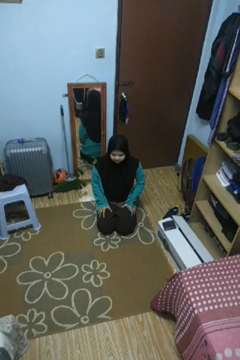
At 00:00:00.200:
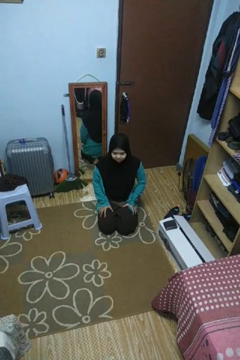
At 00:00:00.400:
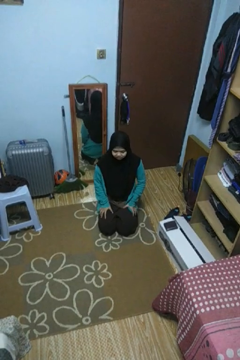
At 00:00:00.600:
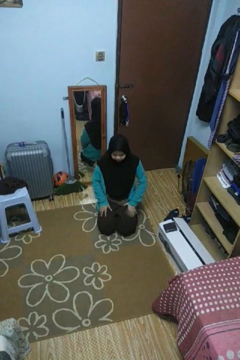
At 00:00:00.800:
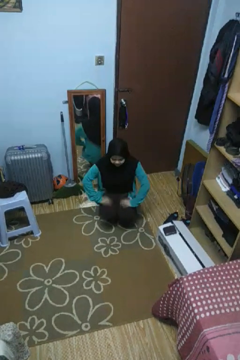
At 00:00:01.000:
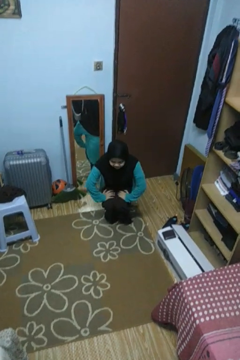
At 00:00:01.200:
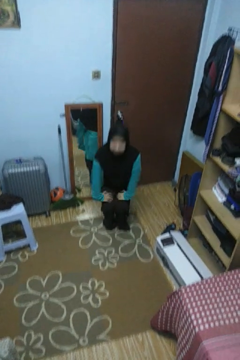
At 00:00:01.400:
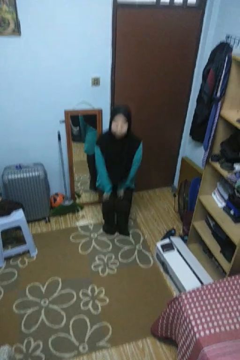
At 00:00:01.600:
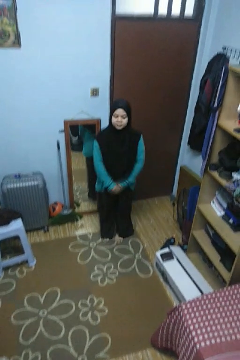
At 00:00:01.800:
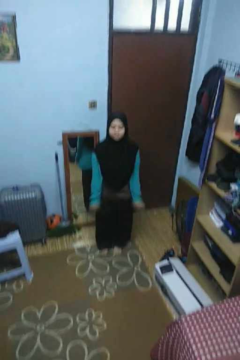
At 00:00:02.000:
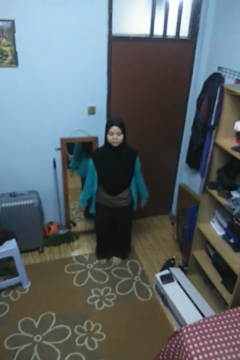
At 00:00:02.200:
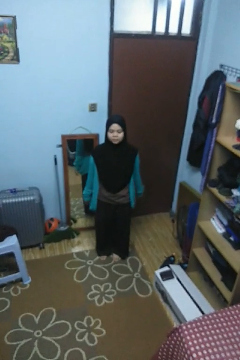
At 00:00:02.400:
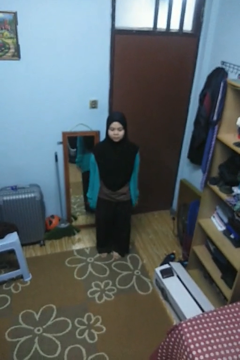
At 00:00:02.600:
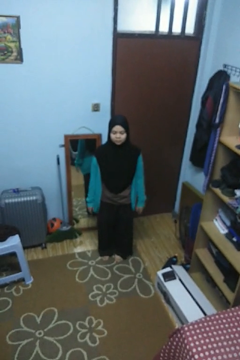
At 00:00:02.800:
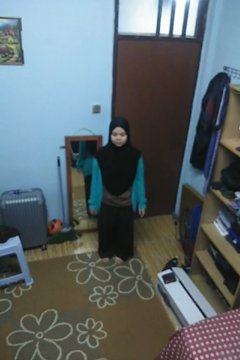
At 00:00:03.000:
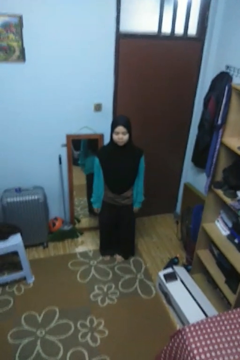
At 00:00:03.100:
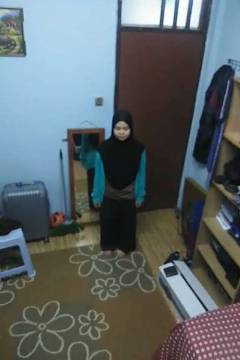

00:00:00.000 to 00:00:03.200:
person stands up from floor

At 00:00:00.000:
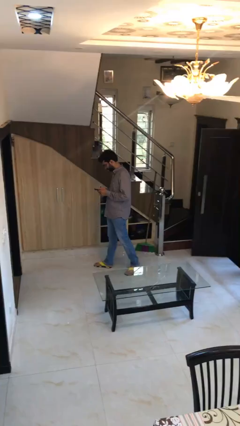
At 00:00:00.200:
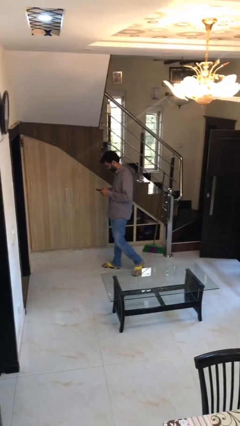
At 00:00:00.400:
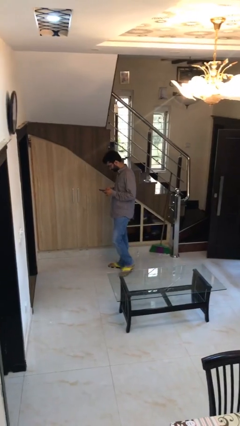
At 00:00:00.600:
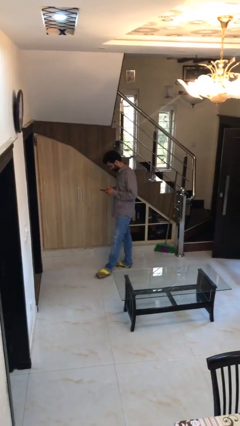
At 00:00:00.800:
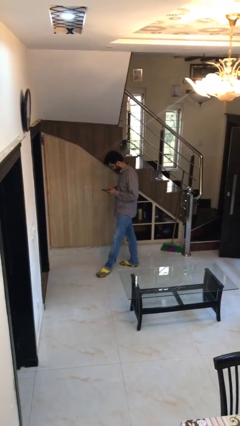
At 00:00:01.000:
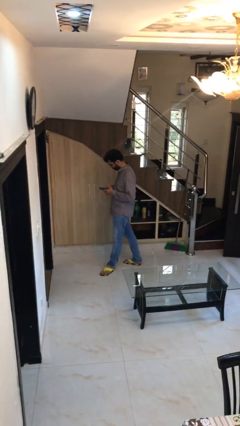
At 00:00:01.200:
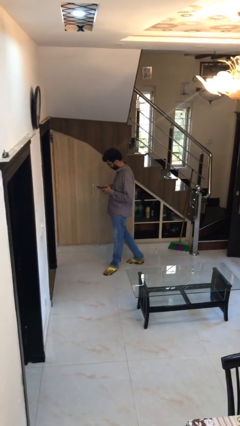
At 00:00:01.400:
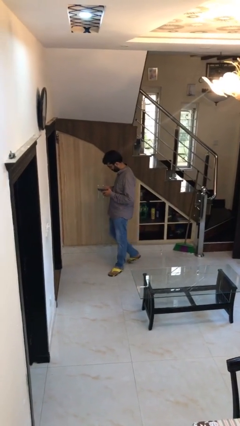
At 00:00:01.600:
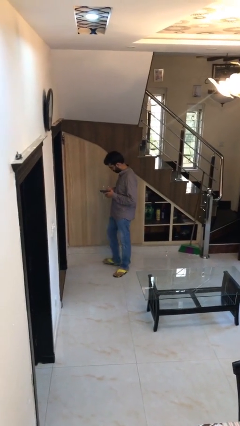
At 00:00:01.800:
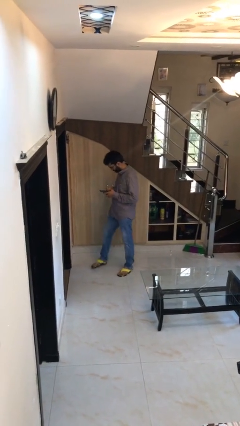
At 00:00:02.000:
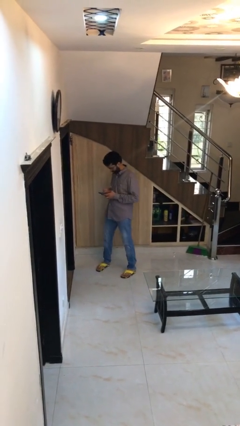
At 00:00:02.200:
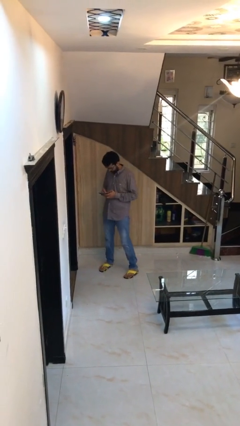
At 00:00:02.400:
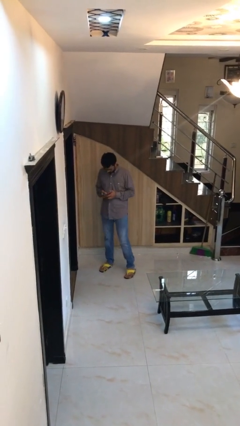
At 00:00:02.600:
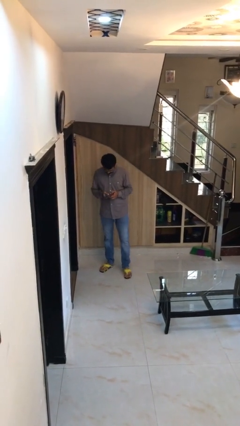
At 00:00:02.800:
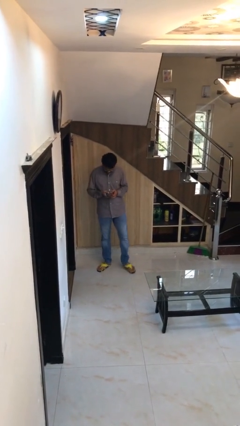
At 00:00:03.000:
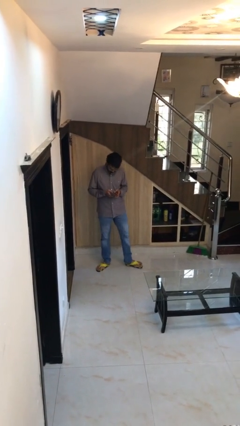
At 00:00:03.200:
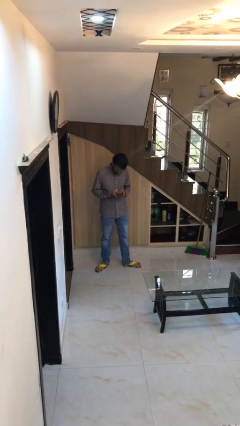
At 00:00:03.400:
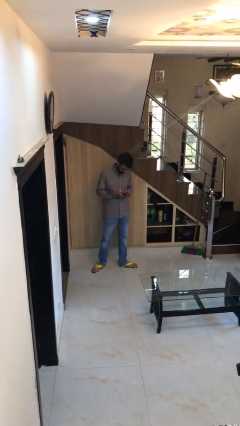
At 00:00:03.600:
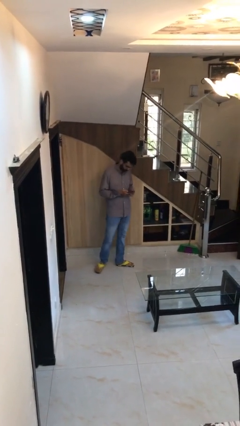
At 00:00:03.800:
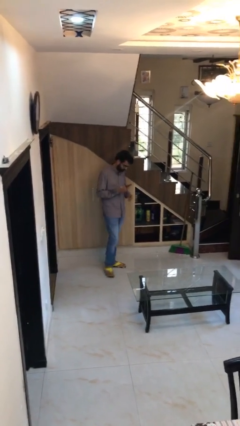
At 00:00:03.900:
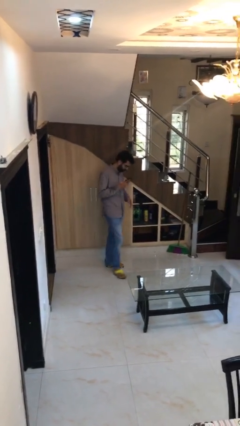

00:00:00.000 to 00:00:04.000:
person texts on phone

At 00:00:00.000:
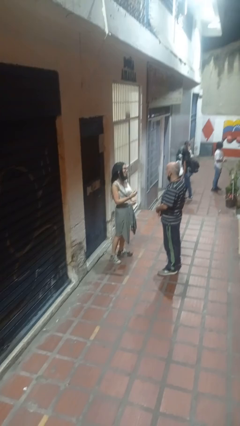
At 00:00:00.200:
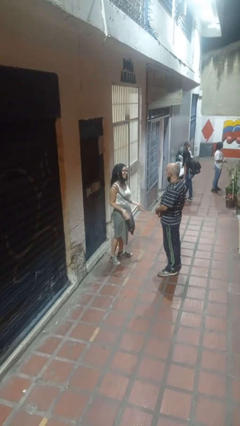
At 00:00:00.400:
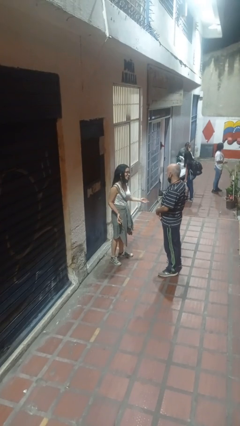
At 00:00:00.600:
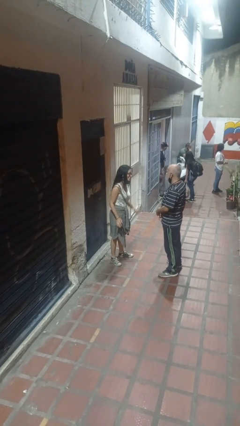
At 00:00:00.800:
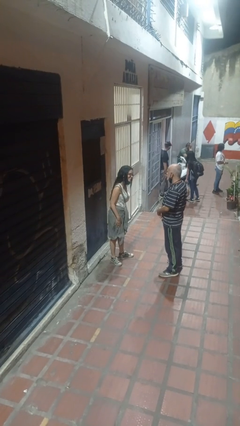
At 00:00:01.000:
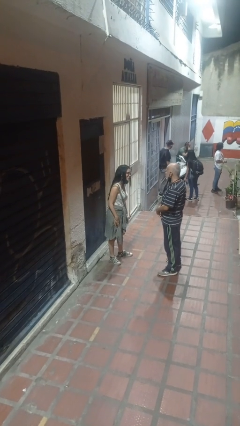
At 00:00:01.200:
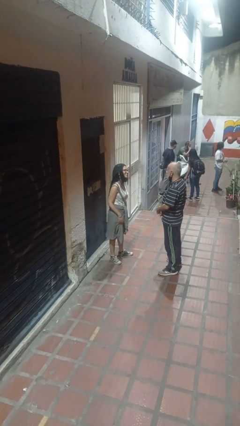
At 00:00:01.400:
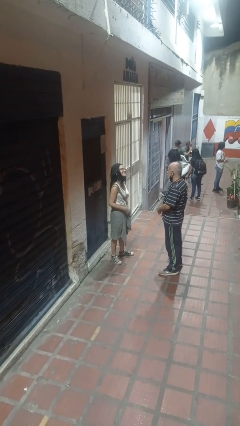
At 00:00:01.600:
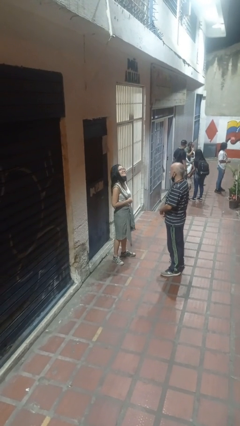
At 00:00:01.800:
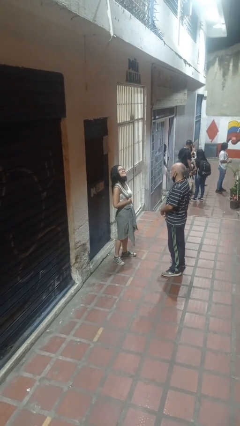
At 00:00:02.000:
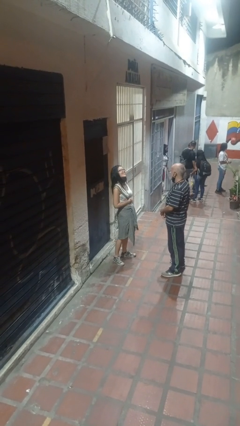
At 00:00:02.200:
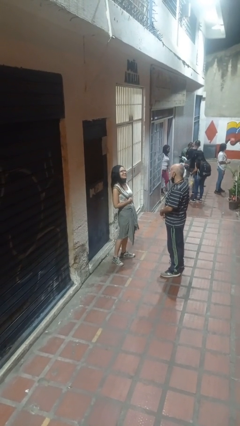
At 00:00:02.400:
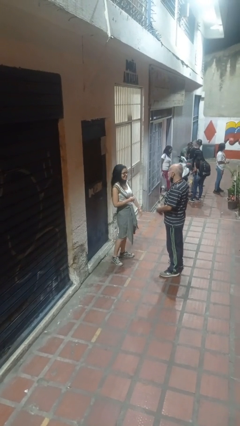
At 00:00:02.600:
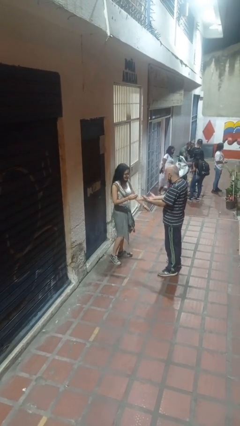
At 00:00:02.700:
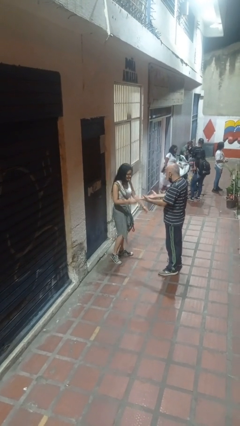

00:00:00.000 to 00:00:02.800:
person laughs with person

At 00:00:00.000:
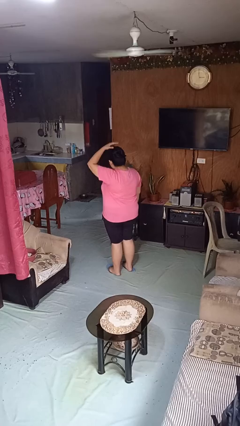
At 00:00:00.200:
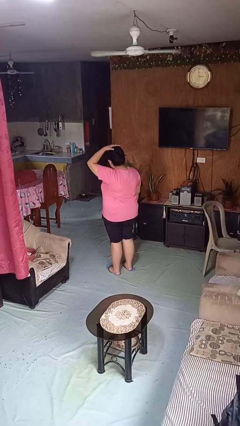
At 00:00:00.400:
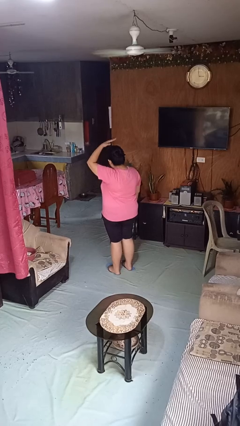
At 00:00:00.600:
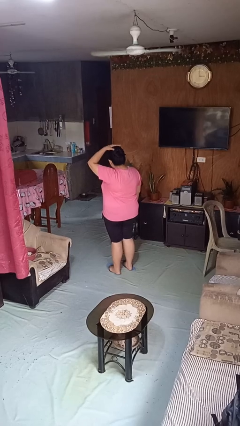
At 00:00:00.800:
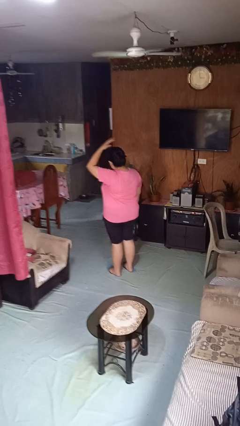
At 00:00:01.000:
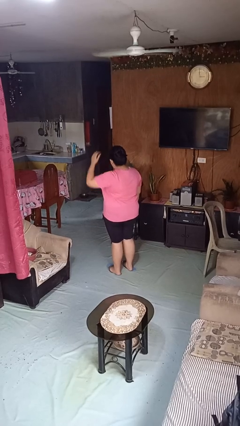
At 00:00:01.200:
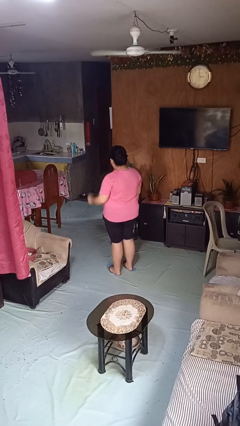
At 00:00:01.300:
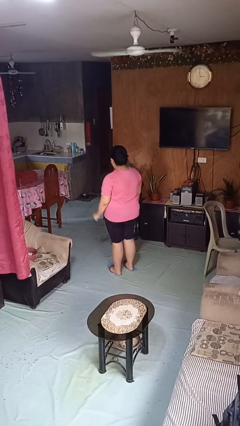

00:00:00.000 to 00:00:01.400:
person pats head

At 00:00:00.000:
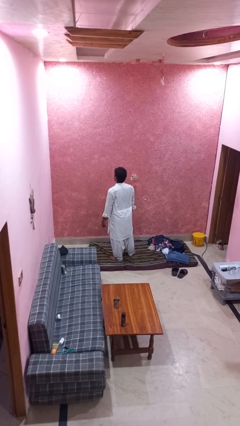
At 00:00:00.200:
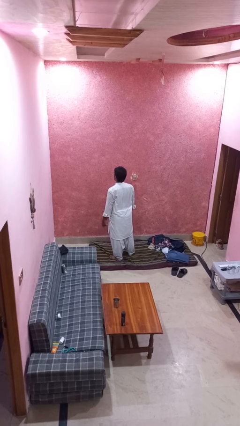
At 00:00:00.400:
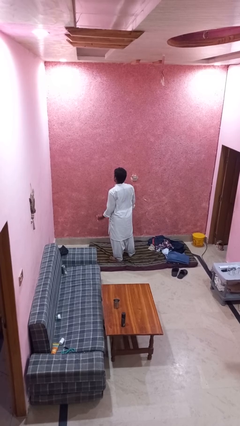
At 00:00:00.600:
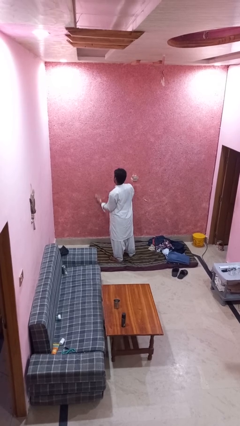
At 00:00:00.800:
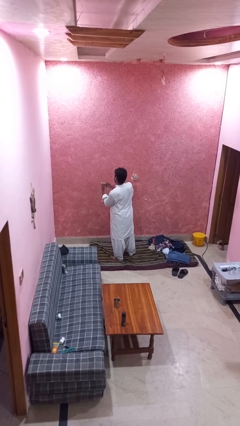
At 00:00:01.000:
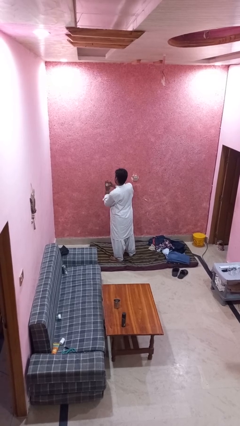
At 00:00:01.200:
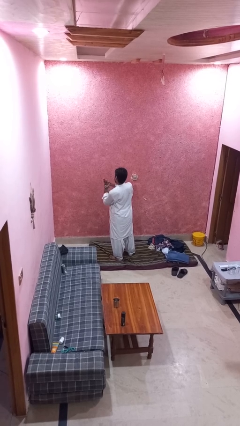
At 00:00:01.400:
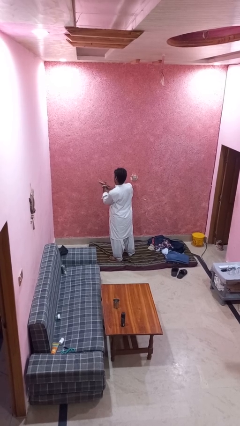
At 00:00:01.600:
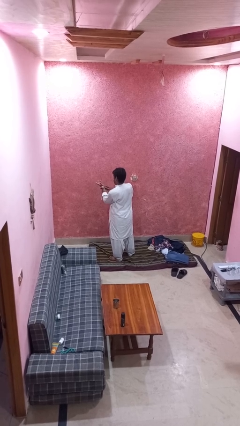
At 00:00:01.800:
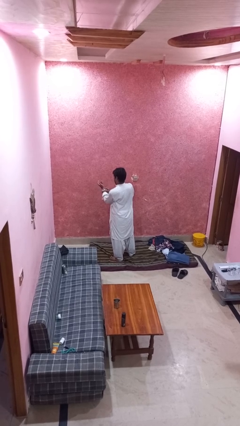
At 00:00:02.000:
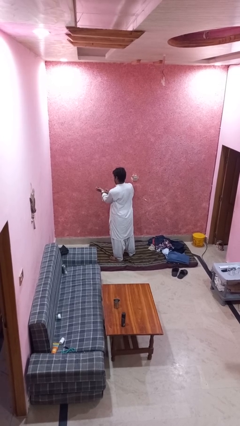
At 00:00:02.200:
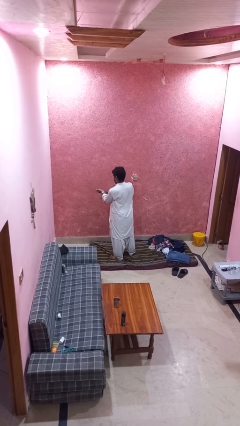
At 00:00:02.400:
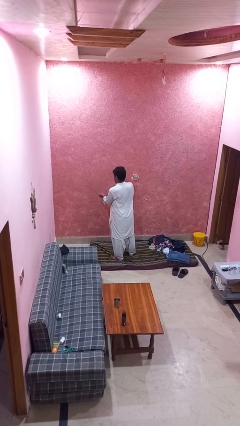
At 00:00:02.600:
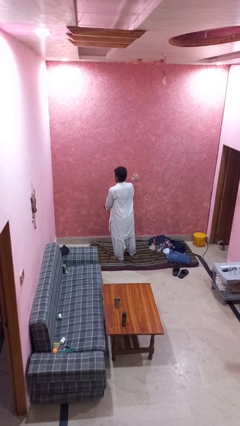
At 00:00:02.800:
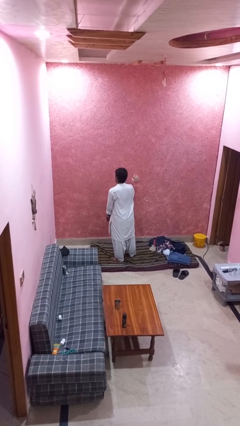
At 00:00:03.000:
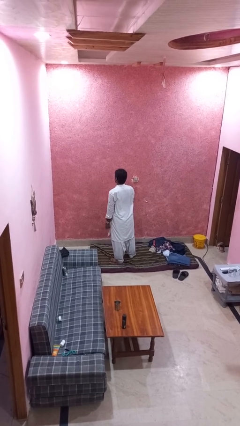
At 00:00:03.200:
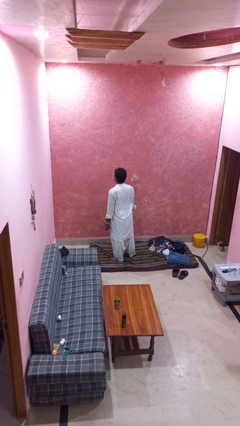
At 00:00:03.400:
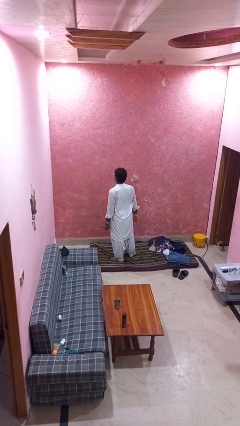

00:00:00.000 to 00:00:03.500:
person puts on wristwatch

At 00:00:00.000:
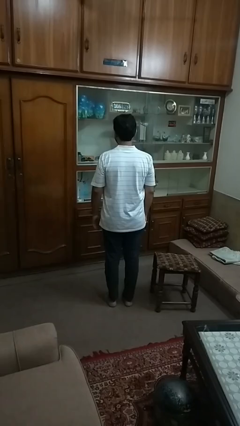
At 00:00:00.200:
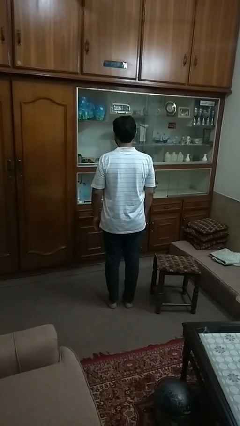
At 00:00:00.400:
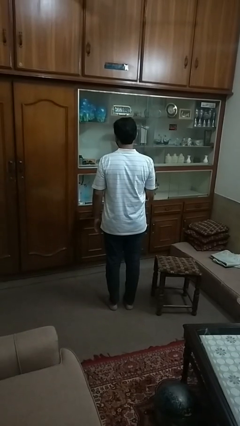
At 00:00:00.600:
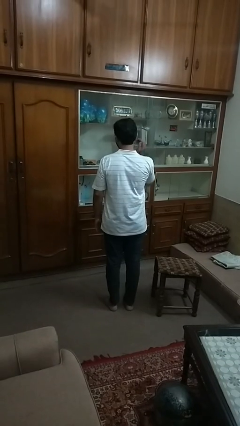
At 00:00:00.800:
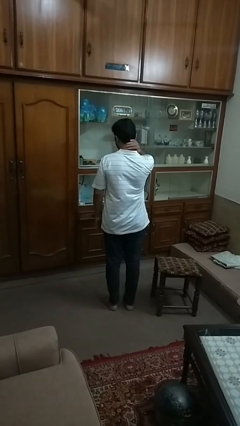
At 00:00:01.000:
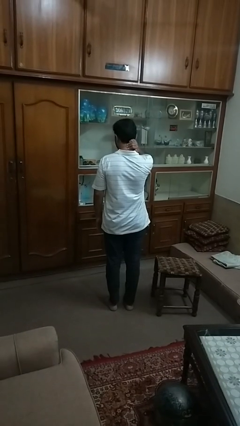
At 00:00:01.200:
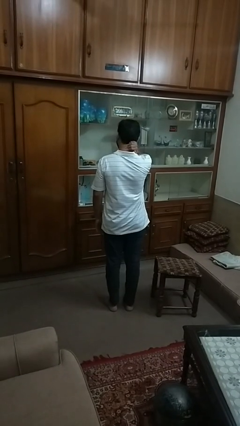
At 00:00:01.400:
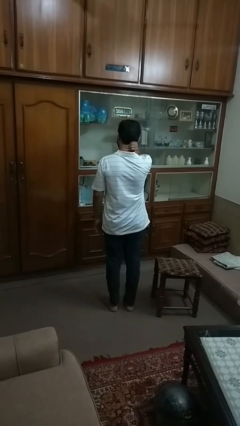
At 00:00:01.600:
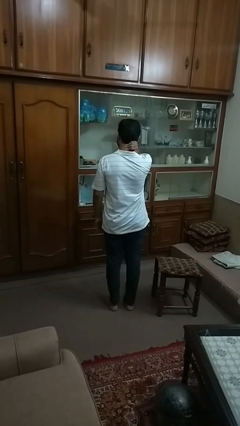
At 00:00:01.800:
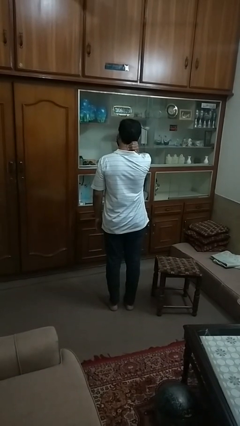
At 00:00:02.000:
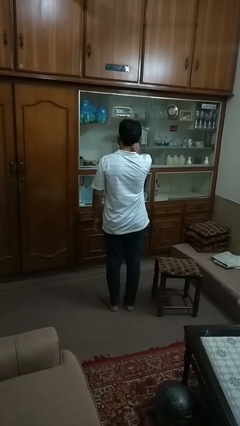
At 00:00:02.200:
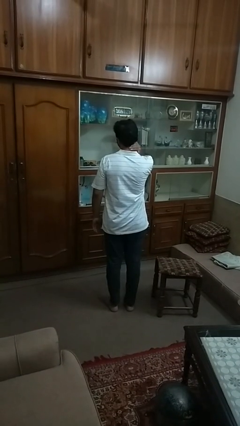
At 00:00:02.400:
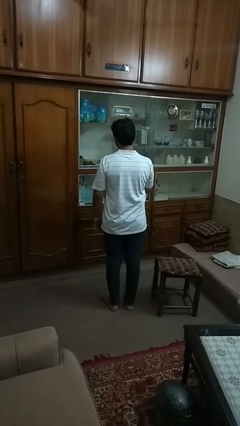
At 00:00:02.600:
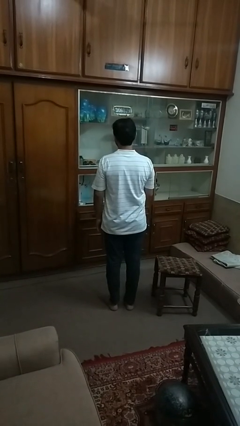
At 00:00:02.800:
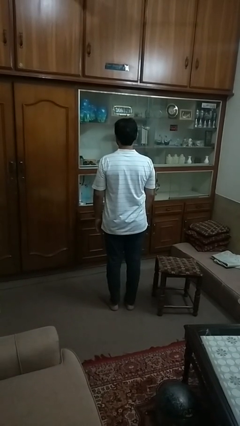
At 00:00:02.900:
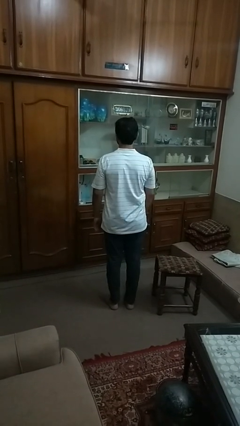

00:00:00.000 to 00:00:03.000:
person rubs neck
